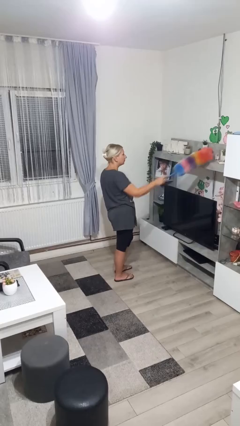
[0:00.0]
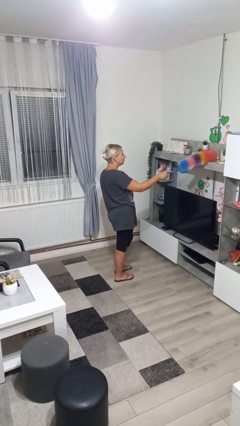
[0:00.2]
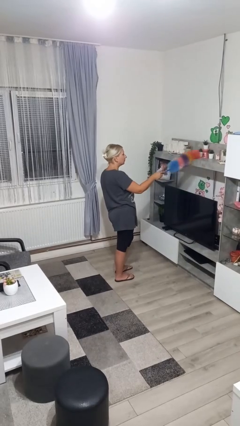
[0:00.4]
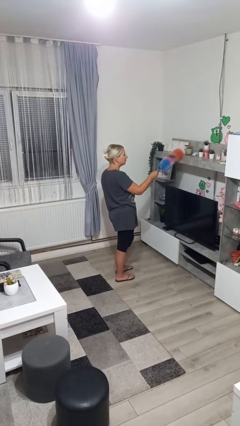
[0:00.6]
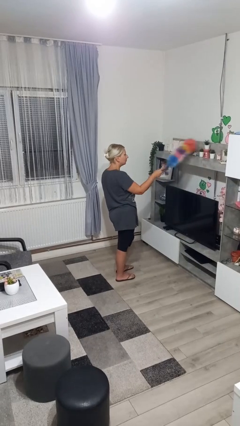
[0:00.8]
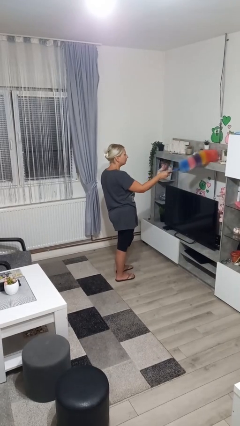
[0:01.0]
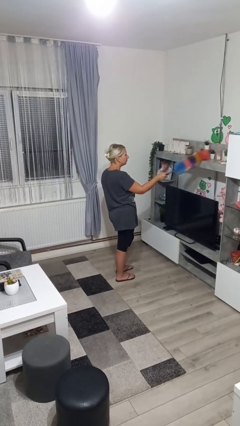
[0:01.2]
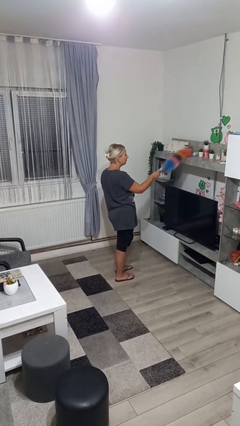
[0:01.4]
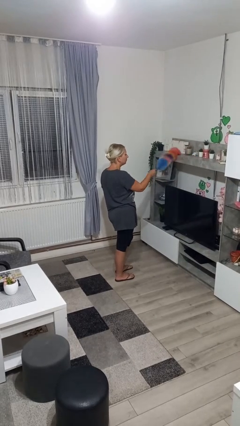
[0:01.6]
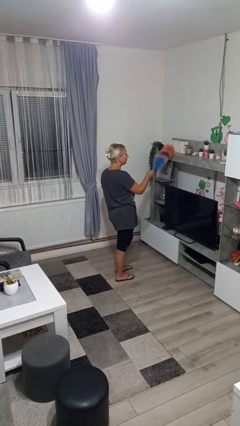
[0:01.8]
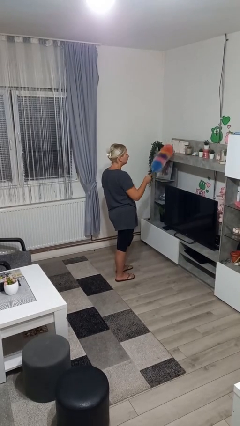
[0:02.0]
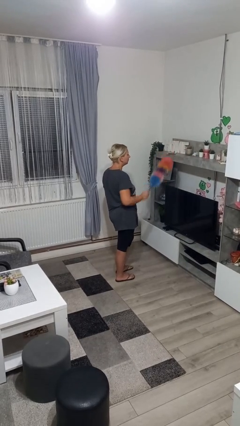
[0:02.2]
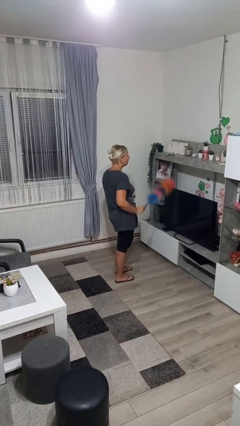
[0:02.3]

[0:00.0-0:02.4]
person dusts furniture

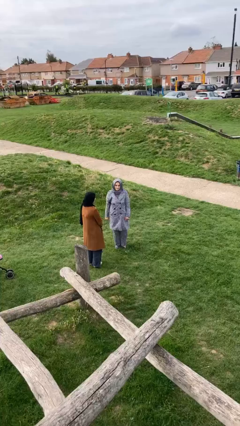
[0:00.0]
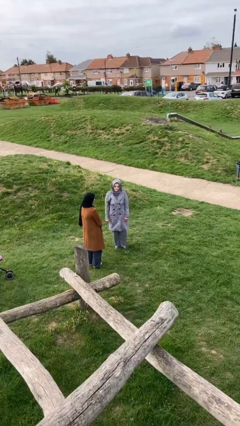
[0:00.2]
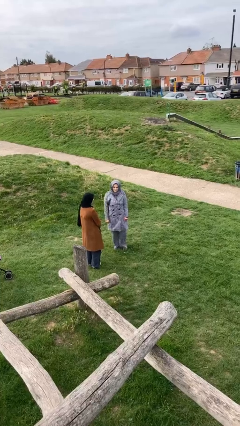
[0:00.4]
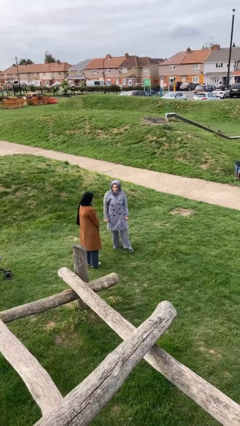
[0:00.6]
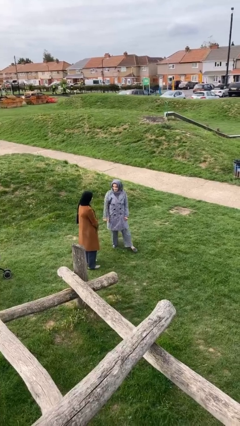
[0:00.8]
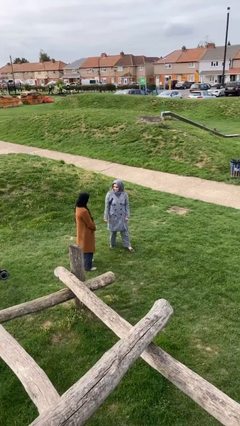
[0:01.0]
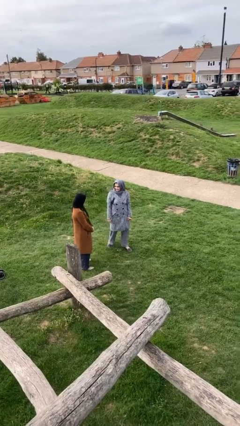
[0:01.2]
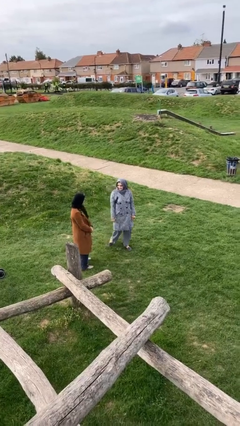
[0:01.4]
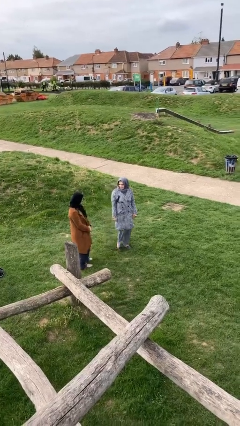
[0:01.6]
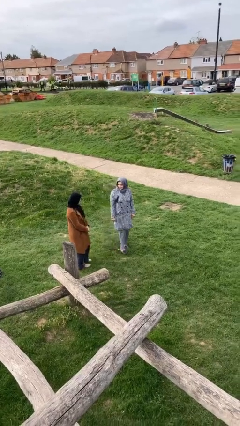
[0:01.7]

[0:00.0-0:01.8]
person talks to person

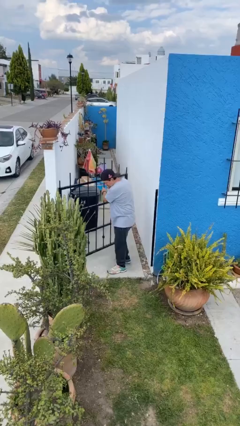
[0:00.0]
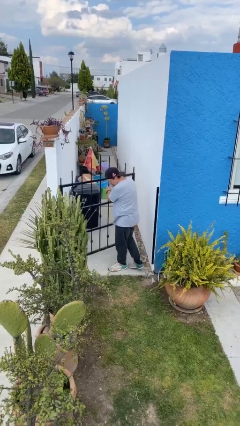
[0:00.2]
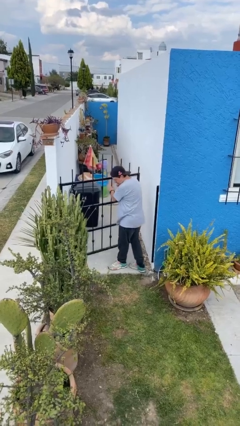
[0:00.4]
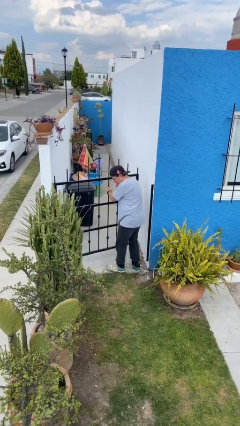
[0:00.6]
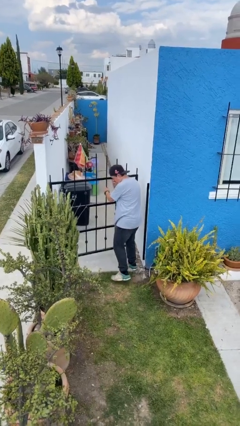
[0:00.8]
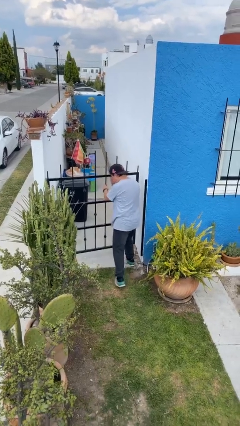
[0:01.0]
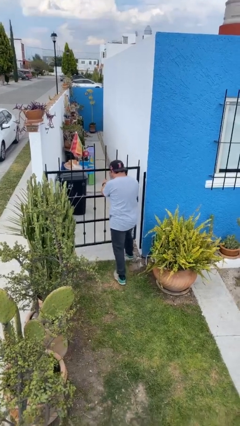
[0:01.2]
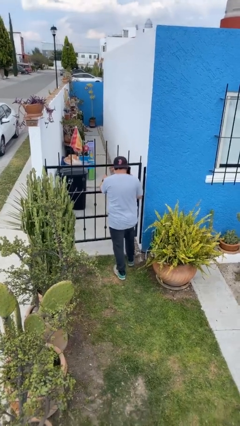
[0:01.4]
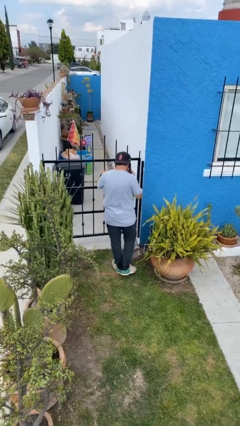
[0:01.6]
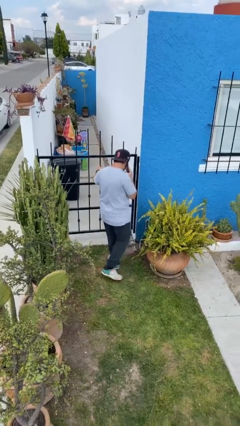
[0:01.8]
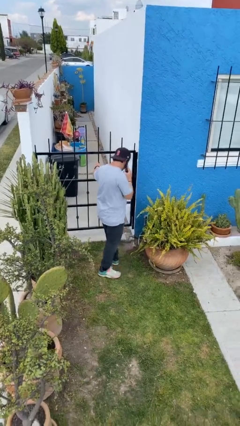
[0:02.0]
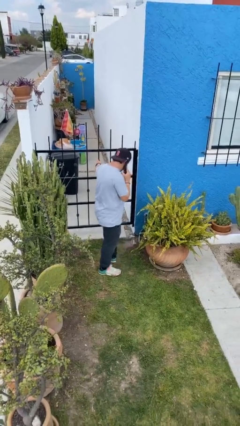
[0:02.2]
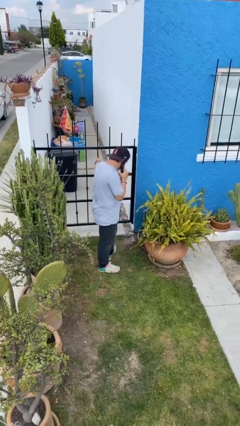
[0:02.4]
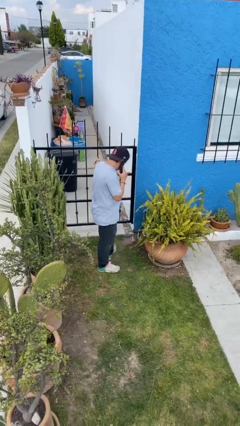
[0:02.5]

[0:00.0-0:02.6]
person closes facility door

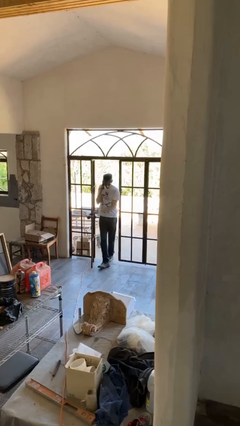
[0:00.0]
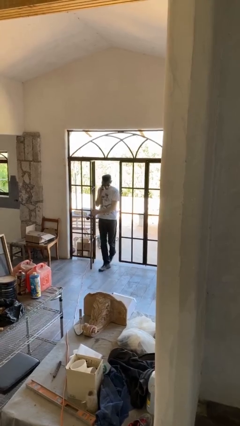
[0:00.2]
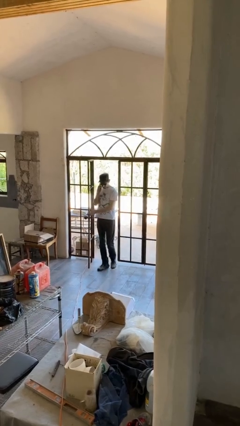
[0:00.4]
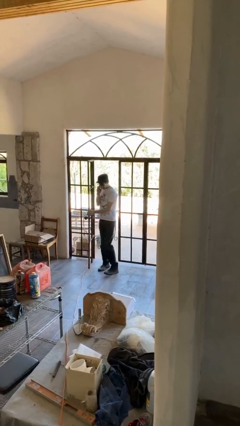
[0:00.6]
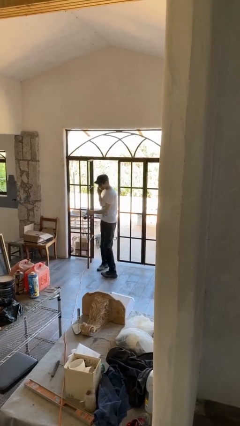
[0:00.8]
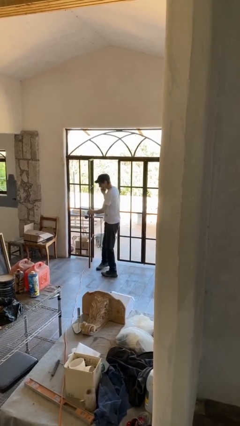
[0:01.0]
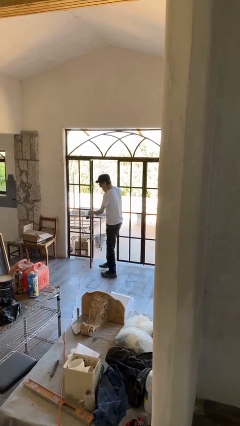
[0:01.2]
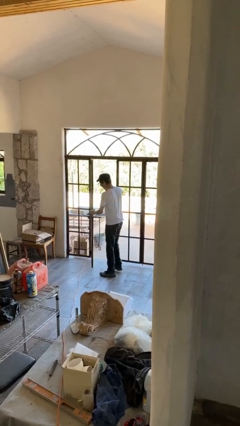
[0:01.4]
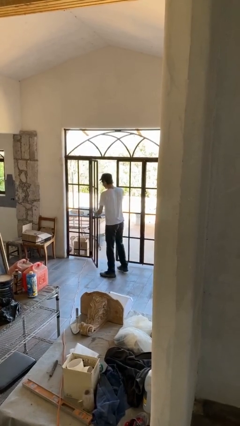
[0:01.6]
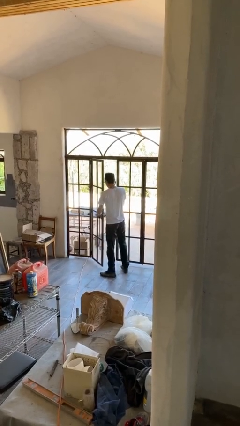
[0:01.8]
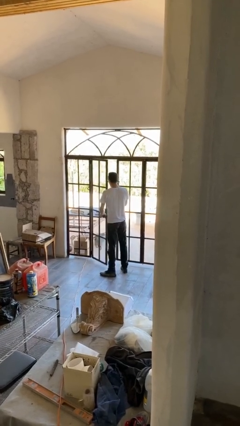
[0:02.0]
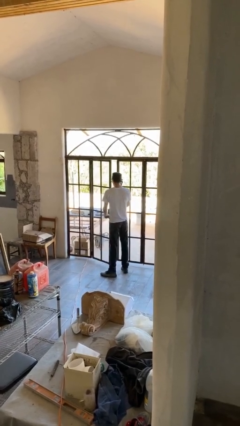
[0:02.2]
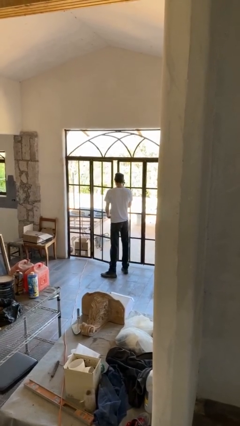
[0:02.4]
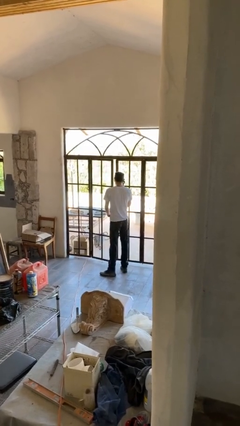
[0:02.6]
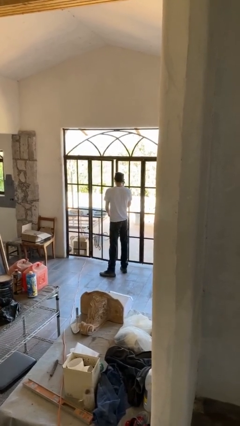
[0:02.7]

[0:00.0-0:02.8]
person enters scene through structure

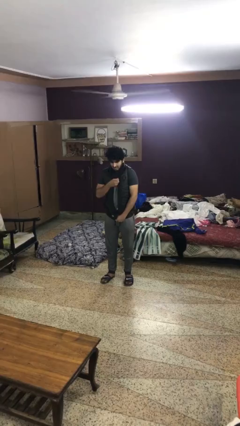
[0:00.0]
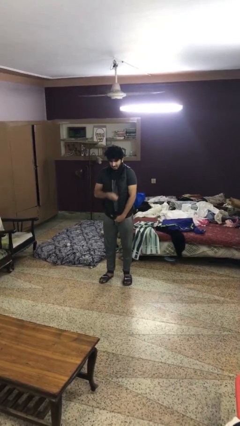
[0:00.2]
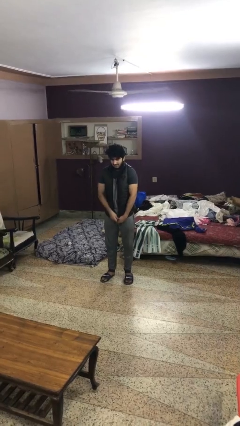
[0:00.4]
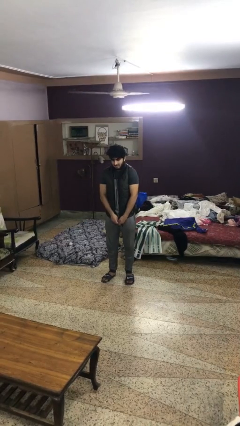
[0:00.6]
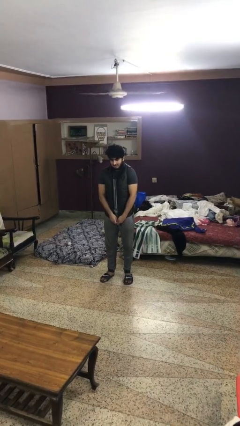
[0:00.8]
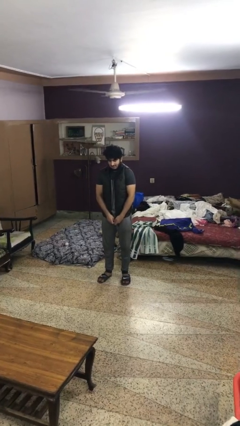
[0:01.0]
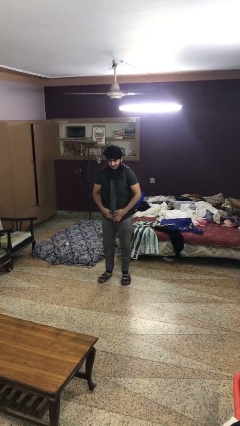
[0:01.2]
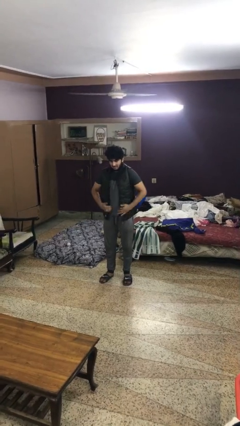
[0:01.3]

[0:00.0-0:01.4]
person unzips jacket

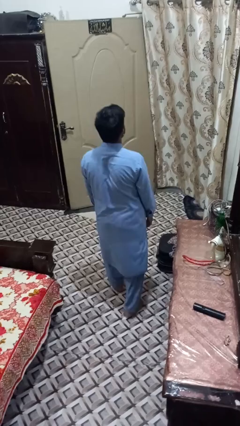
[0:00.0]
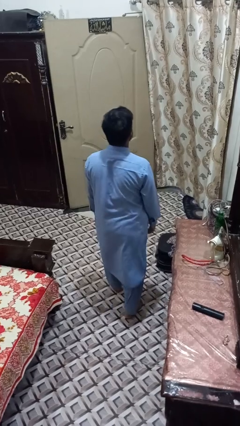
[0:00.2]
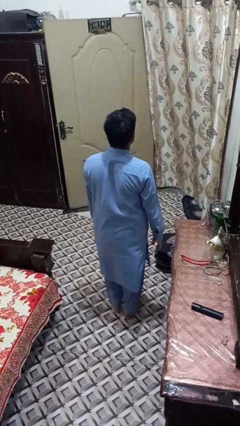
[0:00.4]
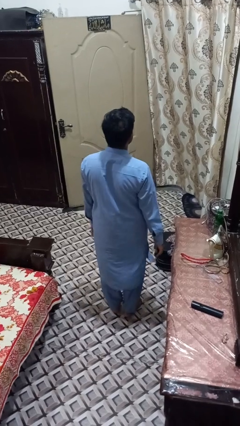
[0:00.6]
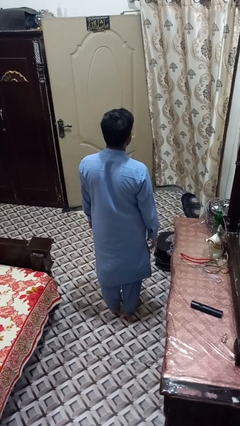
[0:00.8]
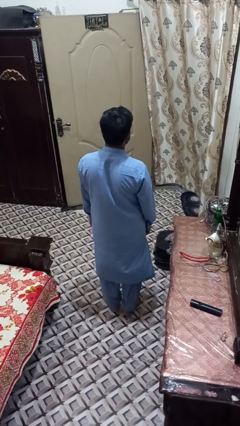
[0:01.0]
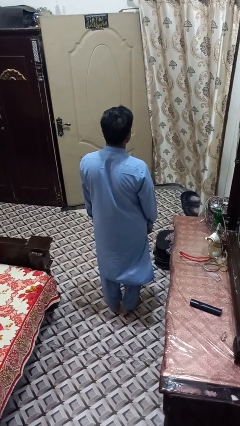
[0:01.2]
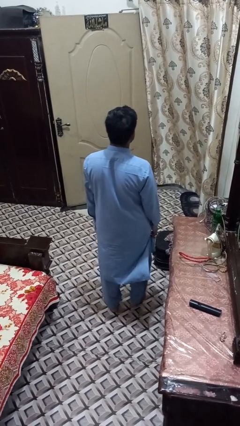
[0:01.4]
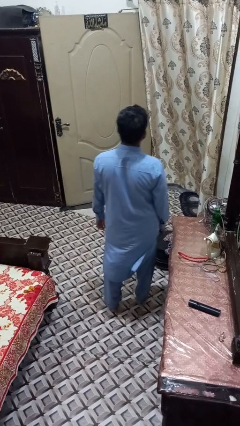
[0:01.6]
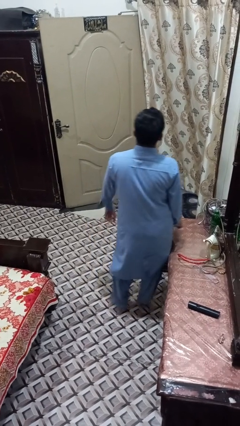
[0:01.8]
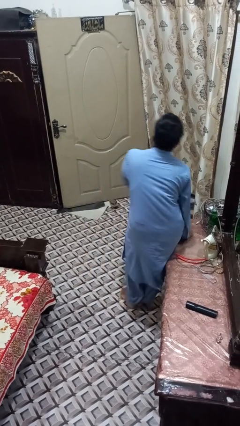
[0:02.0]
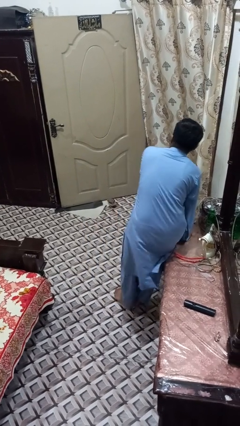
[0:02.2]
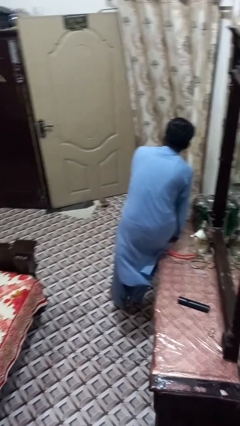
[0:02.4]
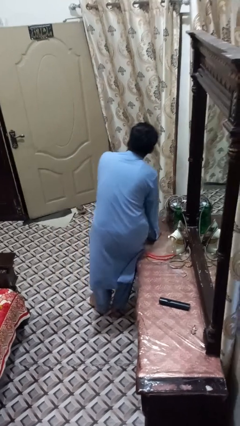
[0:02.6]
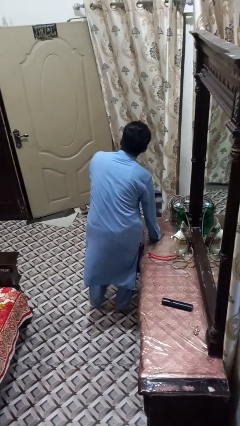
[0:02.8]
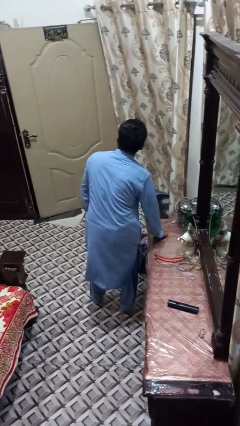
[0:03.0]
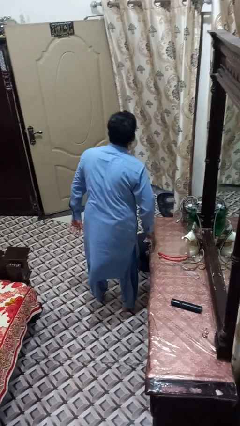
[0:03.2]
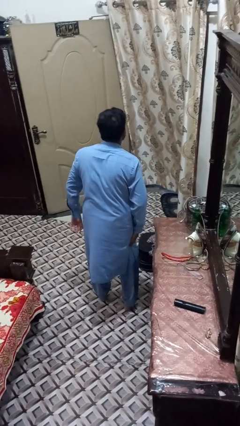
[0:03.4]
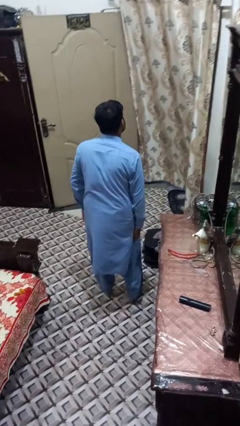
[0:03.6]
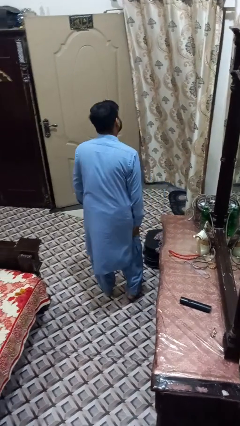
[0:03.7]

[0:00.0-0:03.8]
person bumps into table

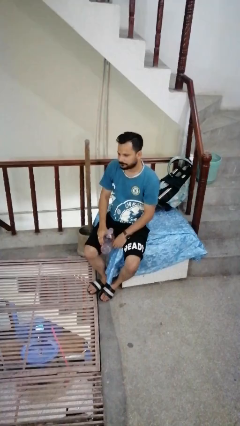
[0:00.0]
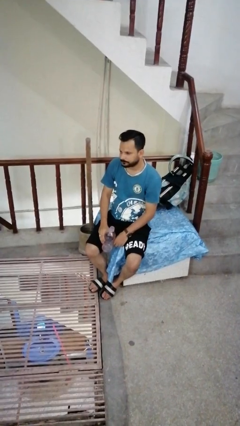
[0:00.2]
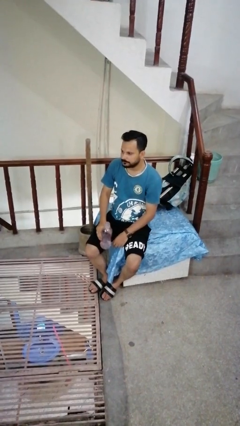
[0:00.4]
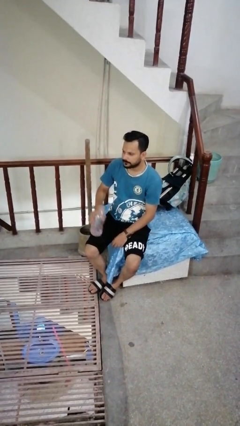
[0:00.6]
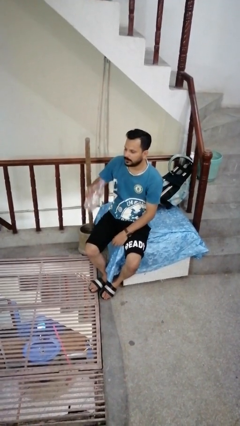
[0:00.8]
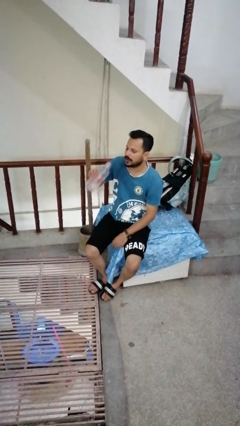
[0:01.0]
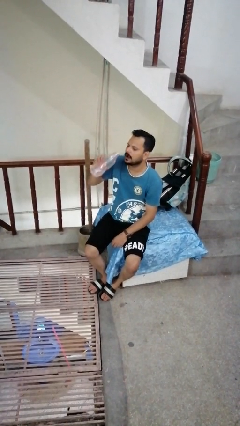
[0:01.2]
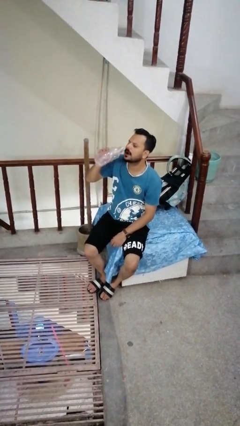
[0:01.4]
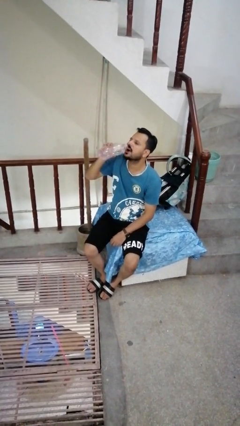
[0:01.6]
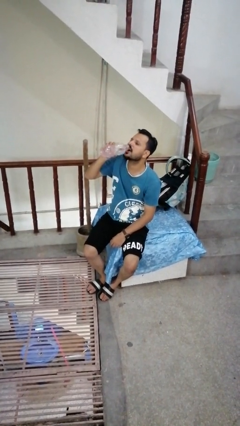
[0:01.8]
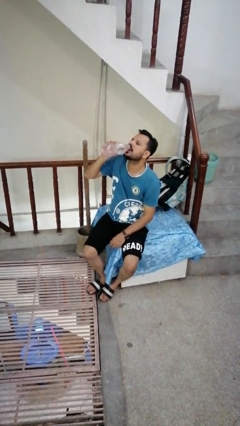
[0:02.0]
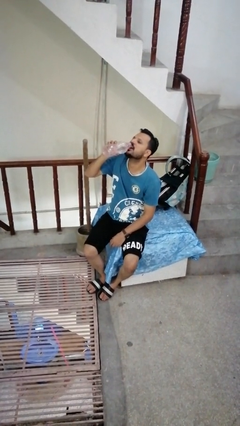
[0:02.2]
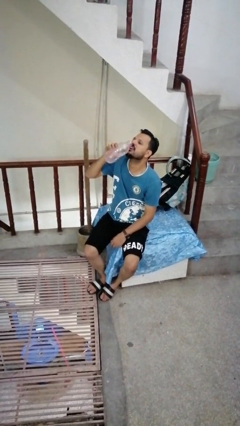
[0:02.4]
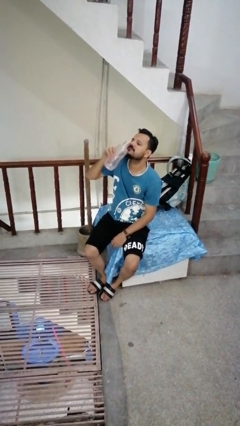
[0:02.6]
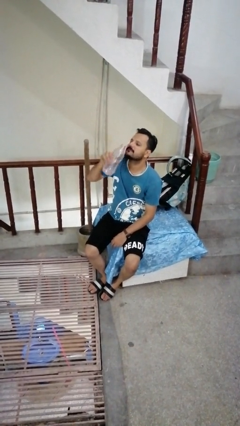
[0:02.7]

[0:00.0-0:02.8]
person drinks from bottle
